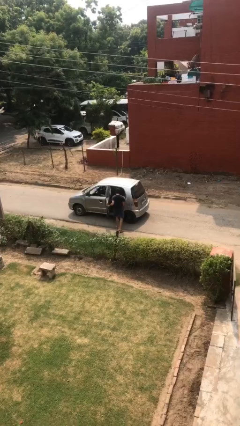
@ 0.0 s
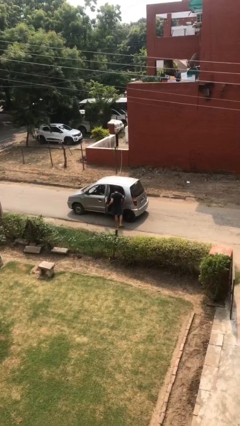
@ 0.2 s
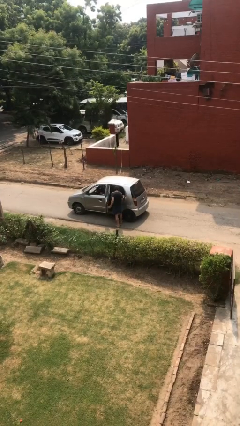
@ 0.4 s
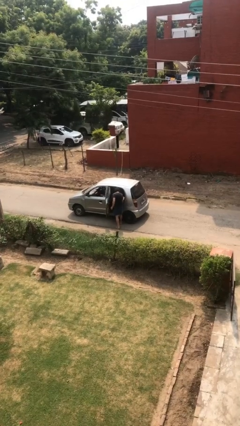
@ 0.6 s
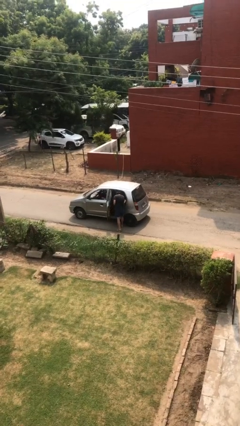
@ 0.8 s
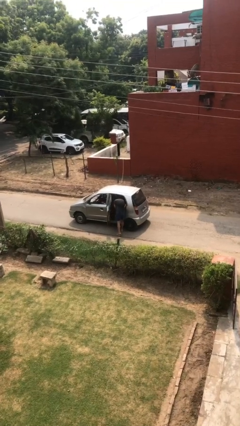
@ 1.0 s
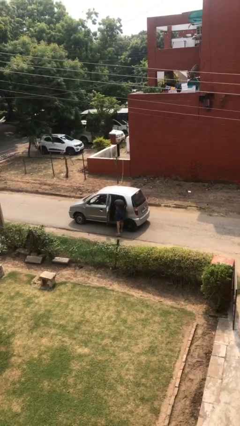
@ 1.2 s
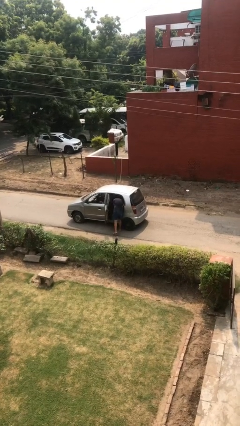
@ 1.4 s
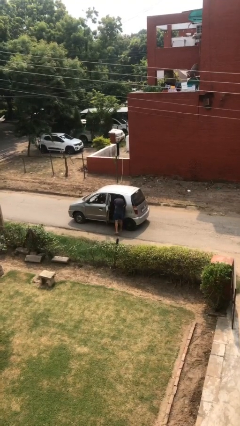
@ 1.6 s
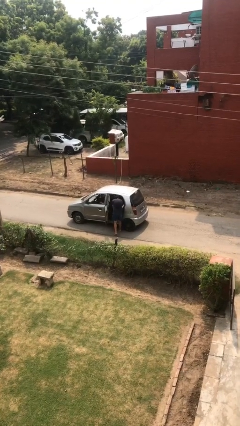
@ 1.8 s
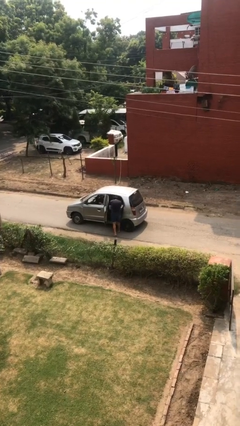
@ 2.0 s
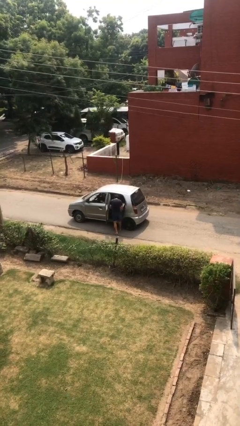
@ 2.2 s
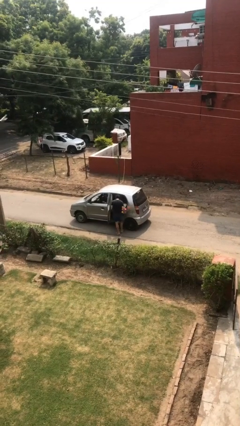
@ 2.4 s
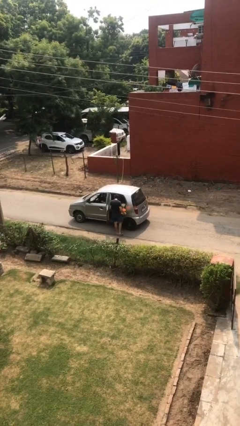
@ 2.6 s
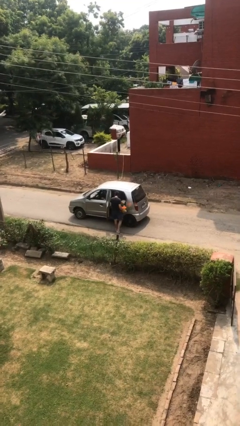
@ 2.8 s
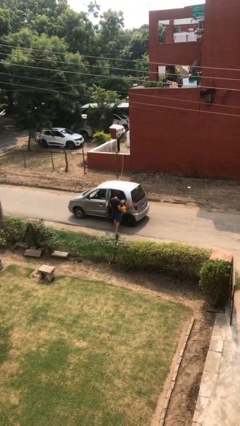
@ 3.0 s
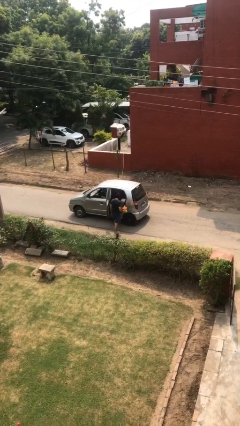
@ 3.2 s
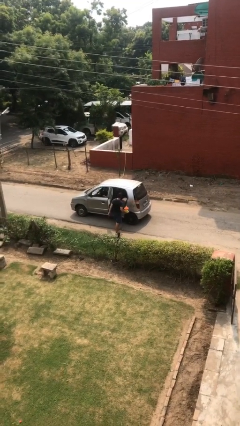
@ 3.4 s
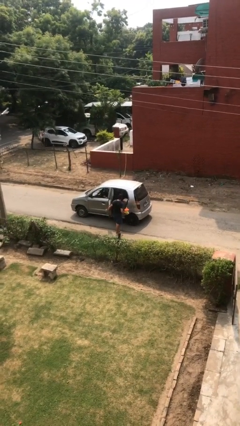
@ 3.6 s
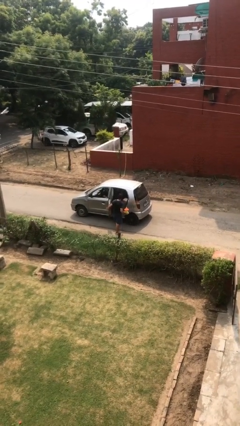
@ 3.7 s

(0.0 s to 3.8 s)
person unloads car

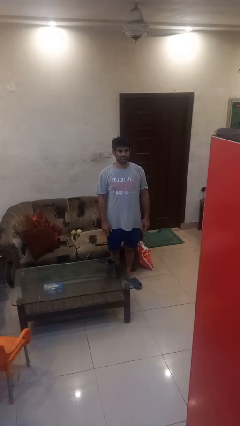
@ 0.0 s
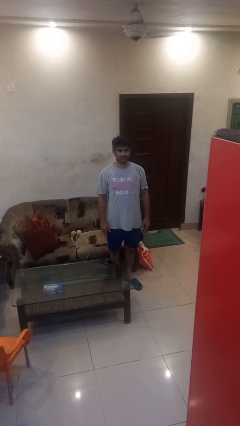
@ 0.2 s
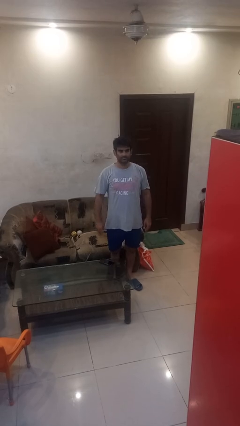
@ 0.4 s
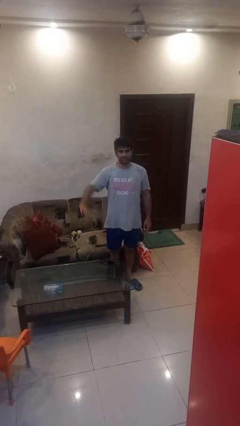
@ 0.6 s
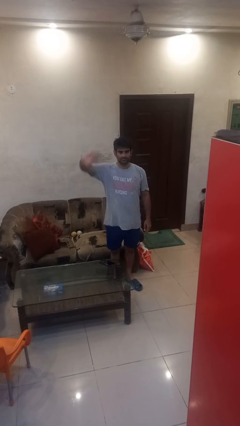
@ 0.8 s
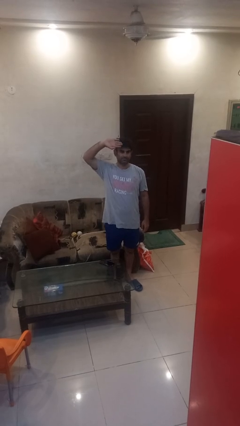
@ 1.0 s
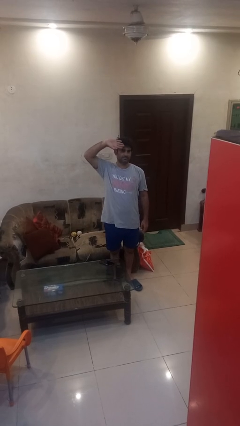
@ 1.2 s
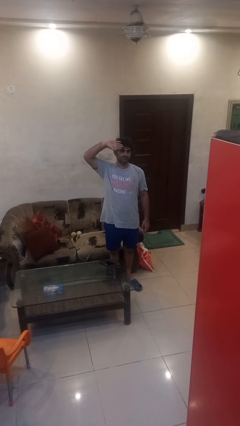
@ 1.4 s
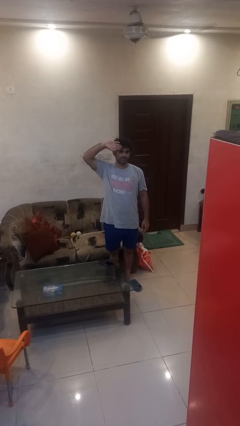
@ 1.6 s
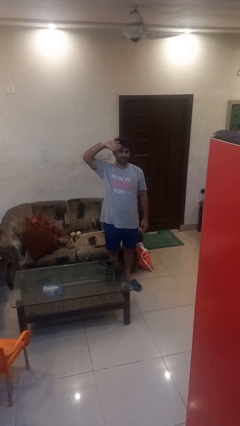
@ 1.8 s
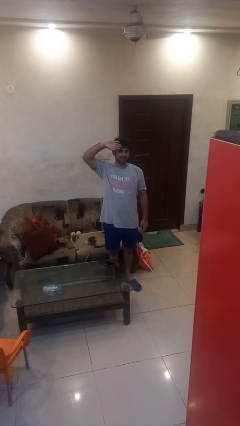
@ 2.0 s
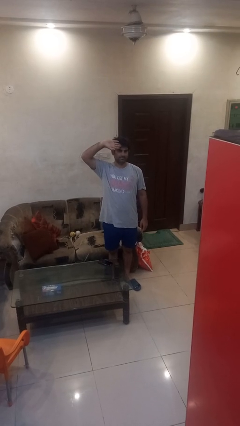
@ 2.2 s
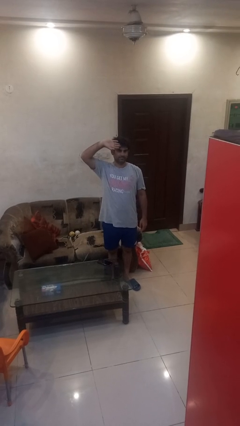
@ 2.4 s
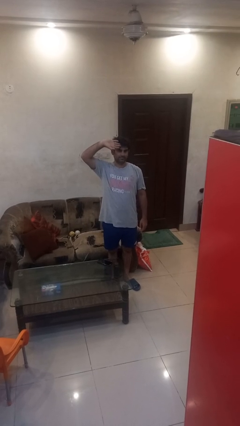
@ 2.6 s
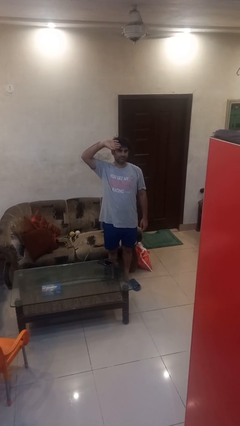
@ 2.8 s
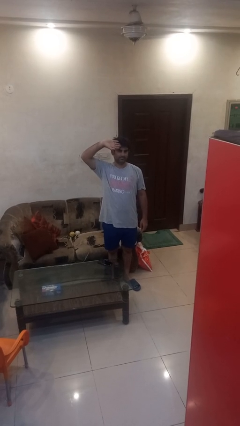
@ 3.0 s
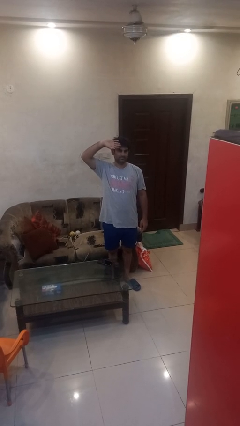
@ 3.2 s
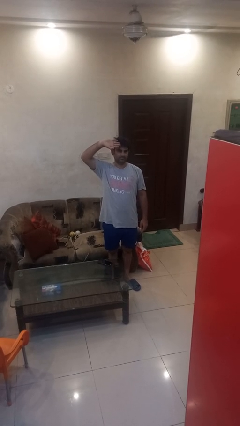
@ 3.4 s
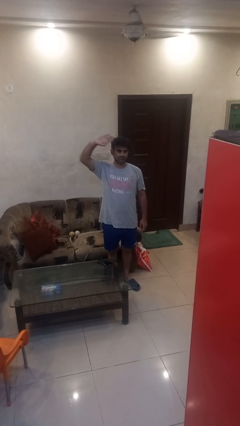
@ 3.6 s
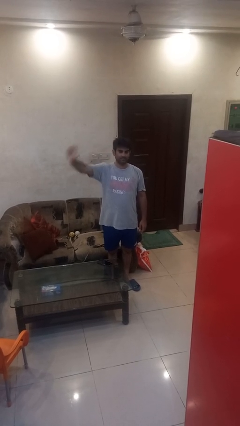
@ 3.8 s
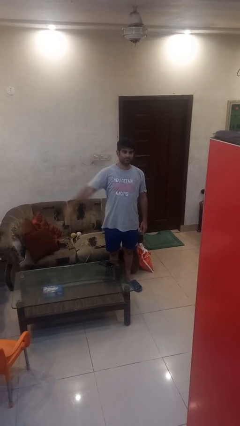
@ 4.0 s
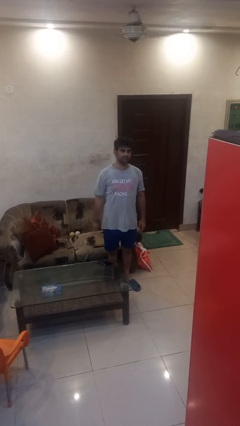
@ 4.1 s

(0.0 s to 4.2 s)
person salutes

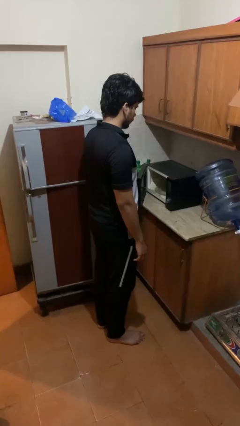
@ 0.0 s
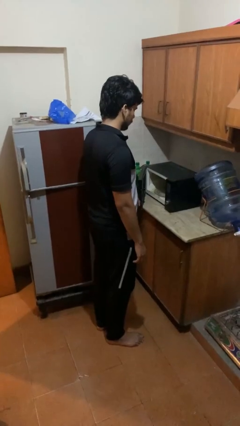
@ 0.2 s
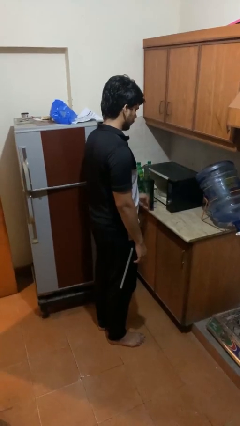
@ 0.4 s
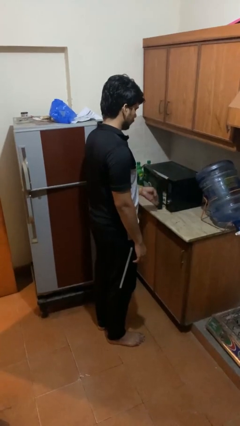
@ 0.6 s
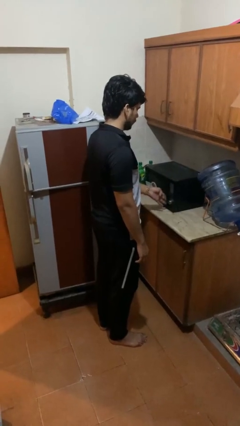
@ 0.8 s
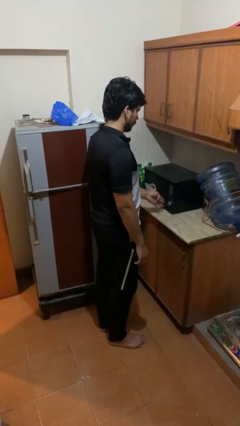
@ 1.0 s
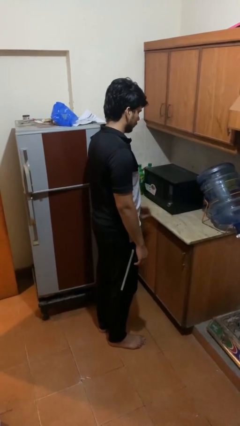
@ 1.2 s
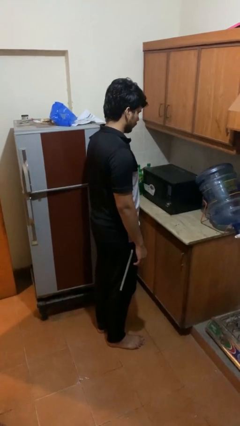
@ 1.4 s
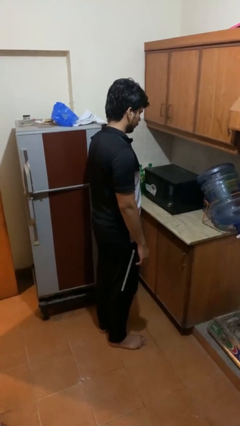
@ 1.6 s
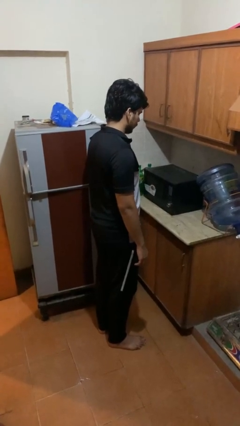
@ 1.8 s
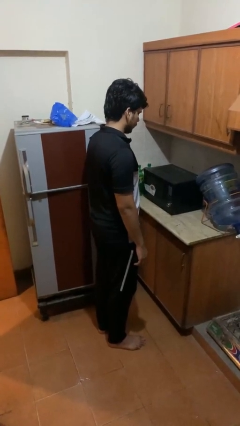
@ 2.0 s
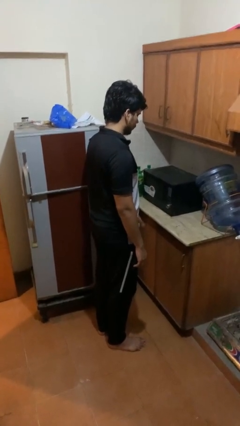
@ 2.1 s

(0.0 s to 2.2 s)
person closes oven door

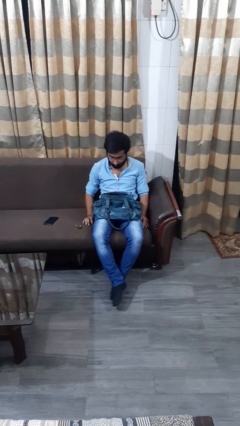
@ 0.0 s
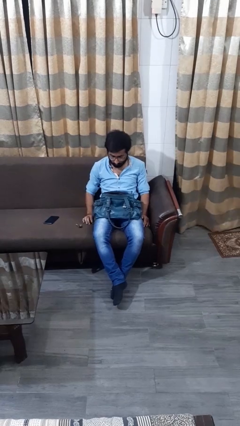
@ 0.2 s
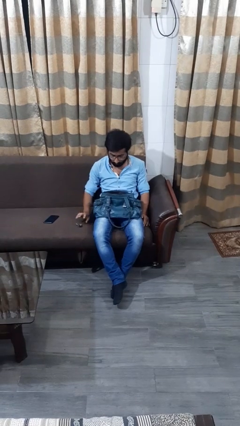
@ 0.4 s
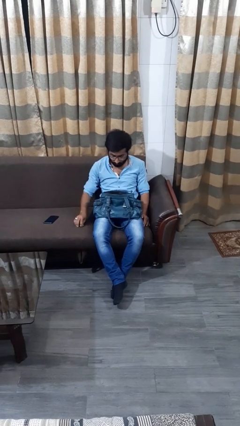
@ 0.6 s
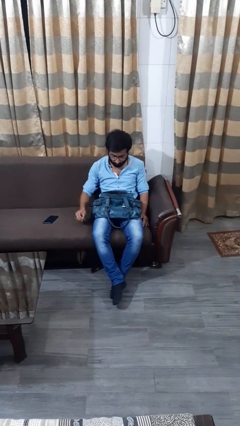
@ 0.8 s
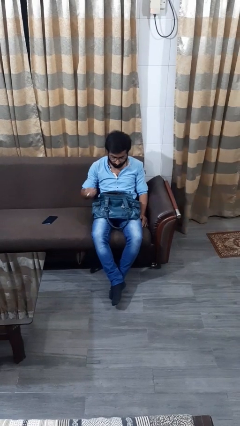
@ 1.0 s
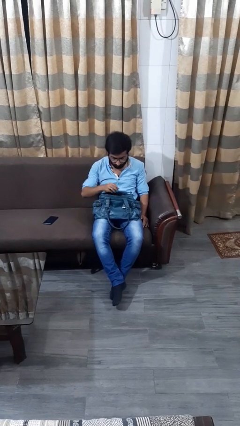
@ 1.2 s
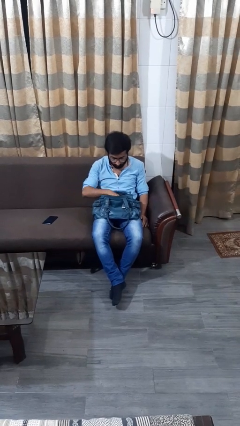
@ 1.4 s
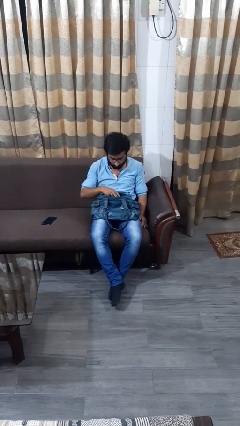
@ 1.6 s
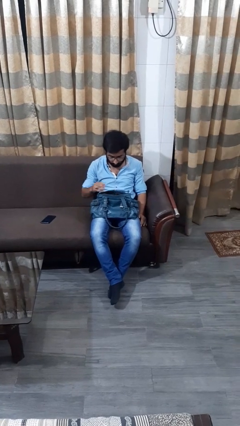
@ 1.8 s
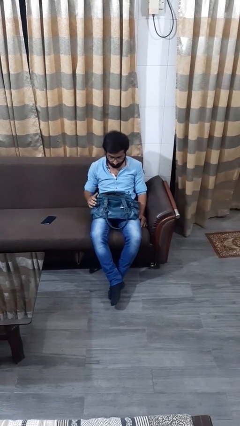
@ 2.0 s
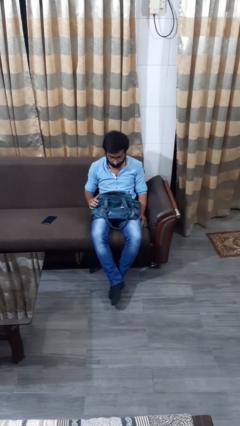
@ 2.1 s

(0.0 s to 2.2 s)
person puts object into purse

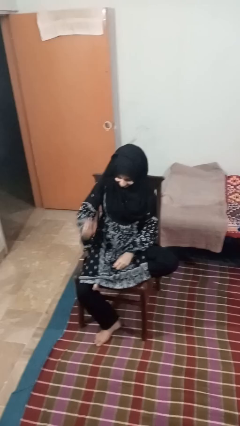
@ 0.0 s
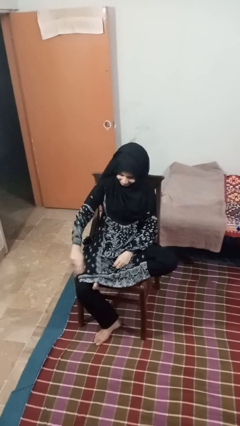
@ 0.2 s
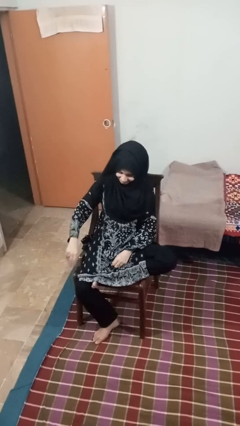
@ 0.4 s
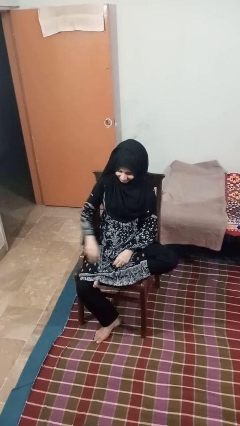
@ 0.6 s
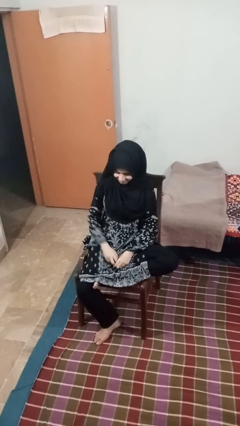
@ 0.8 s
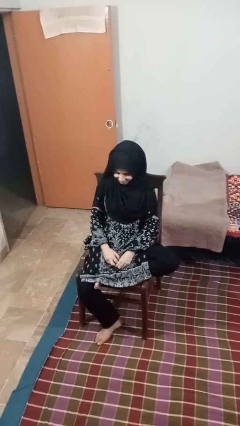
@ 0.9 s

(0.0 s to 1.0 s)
person swats bug

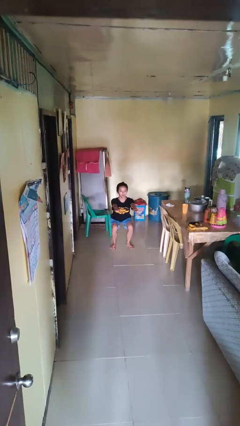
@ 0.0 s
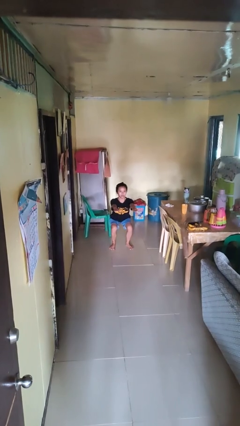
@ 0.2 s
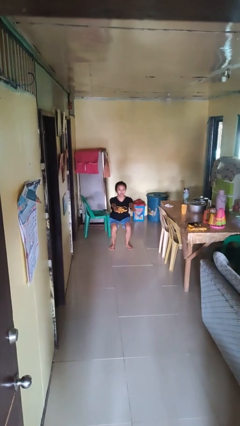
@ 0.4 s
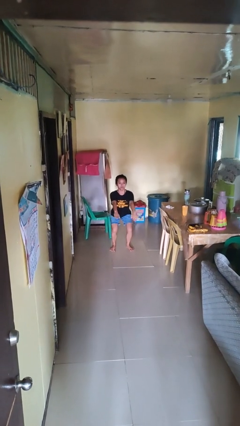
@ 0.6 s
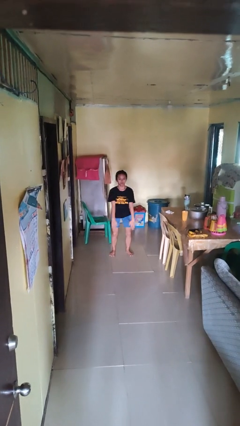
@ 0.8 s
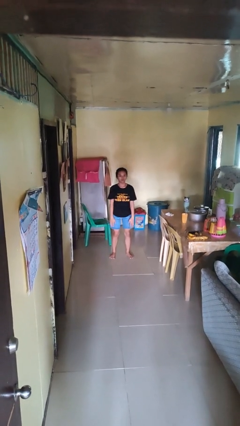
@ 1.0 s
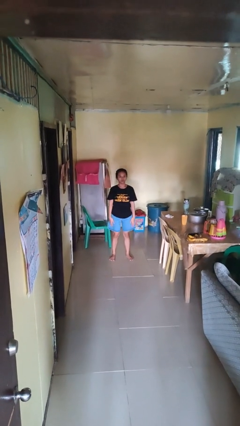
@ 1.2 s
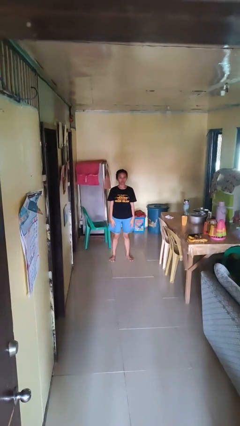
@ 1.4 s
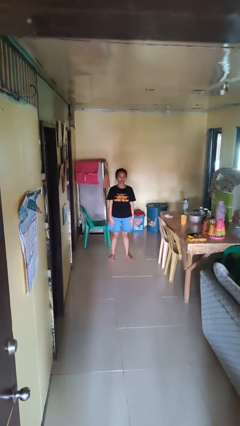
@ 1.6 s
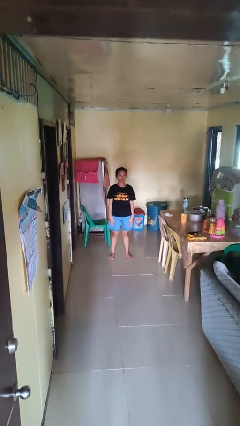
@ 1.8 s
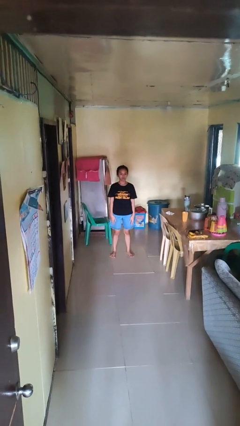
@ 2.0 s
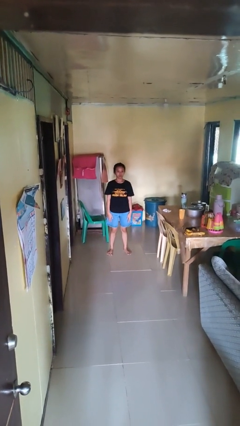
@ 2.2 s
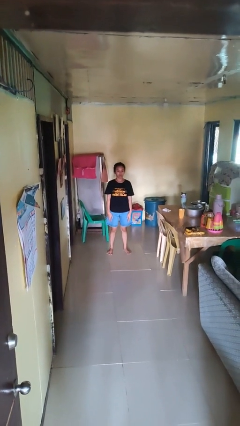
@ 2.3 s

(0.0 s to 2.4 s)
person stands up

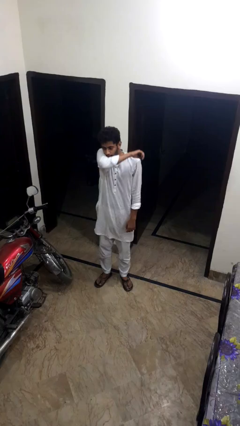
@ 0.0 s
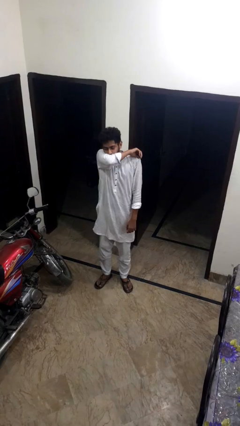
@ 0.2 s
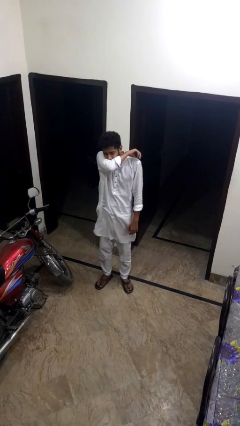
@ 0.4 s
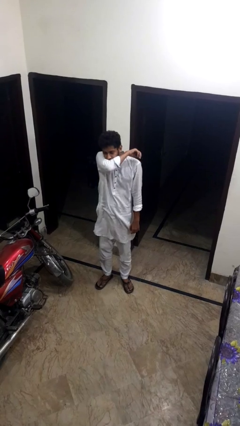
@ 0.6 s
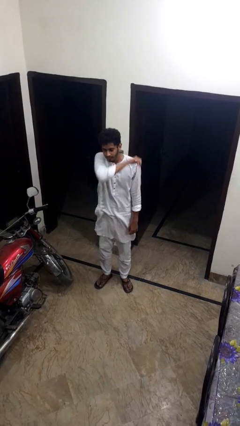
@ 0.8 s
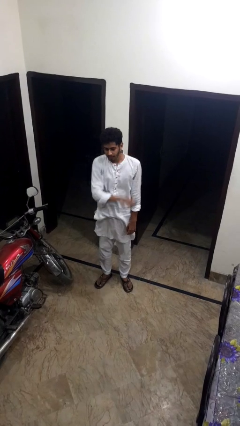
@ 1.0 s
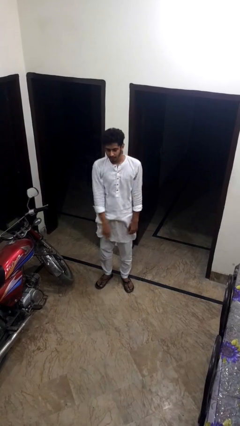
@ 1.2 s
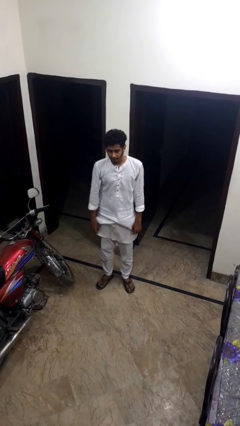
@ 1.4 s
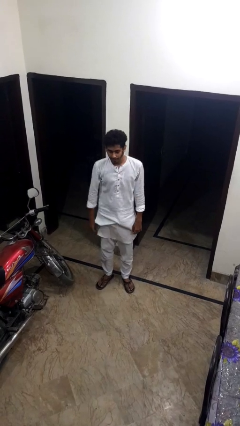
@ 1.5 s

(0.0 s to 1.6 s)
person sneezes into arm

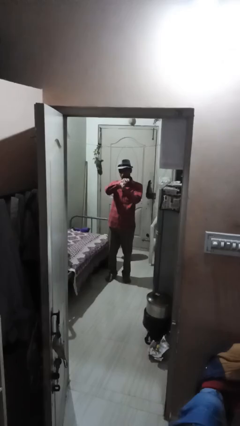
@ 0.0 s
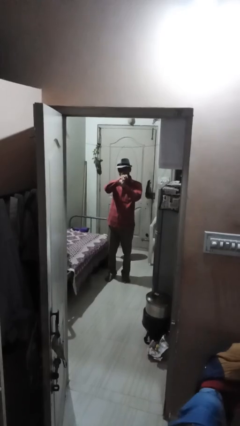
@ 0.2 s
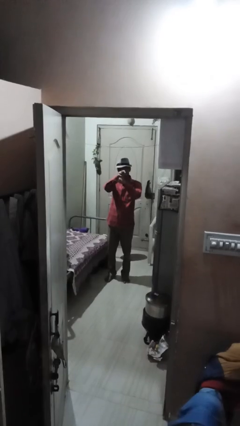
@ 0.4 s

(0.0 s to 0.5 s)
person cracks knuckles
